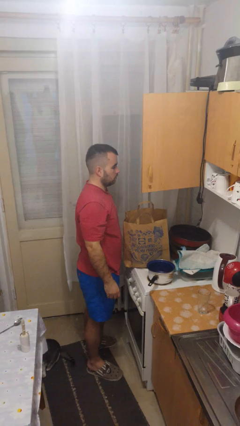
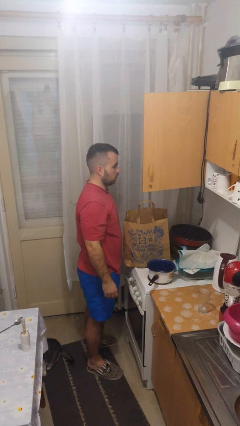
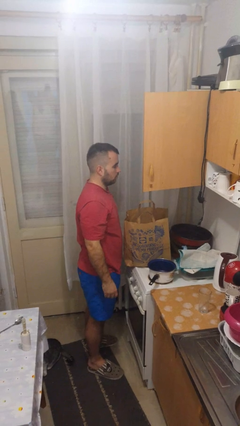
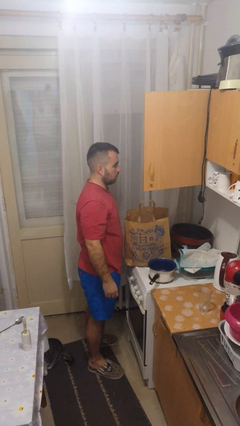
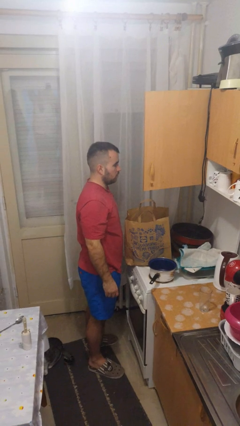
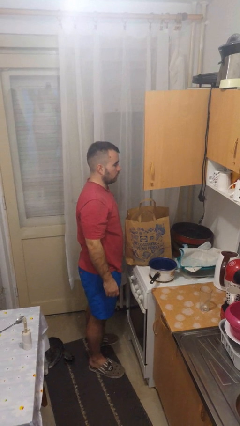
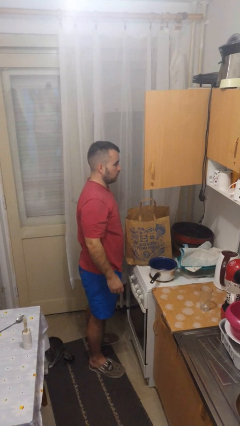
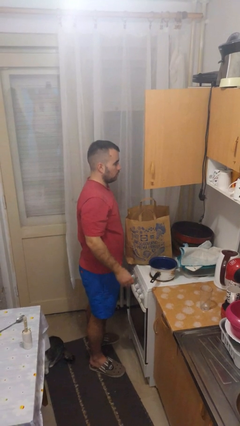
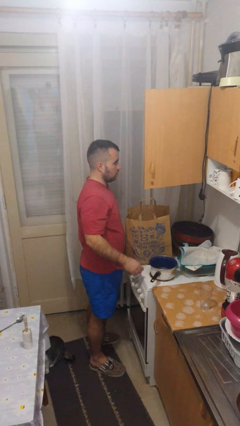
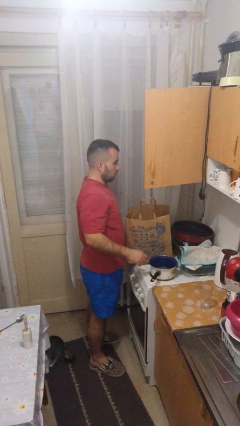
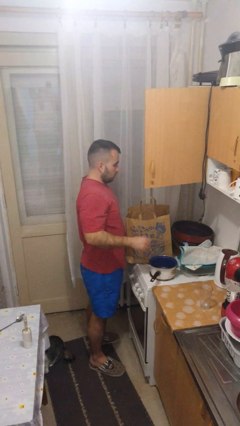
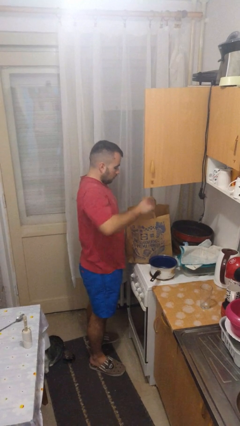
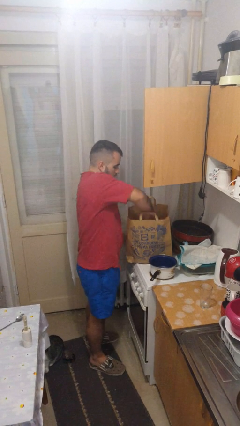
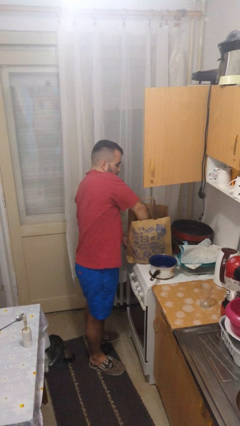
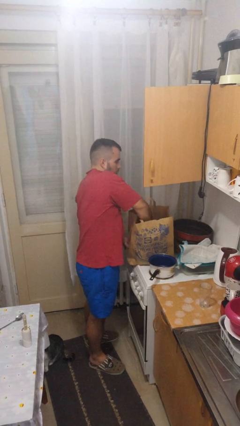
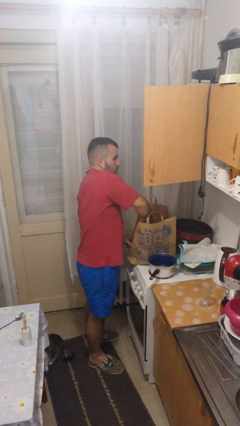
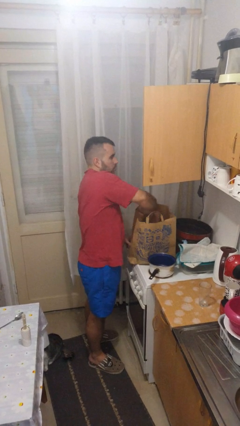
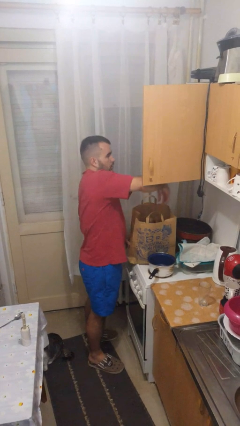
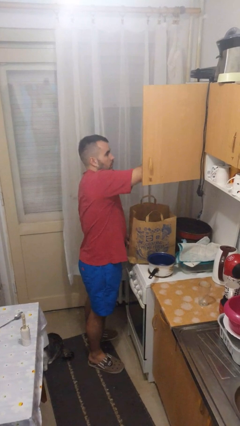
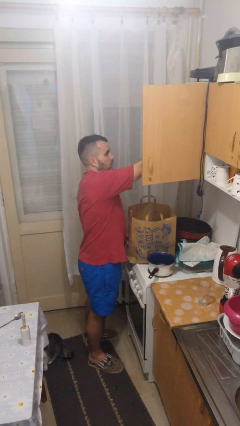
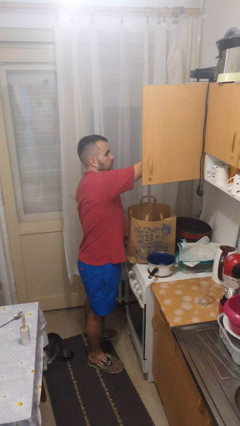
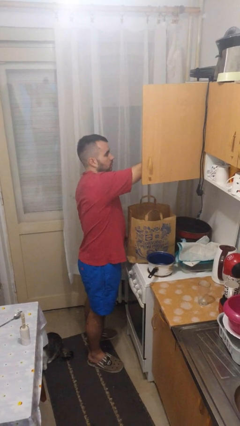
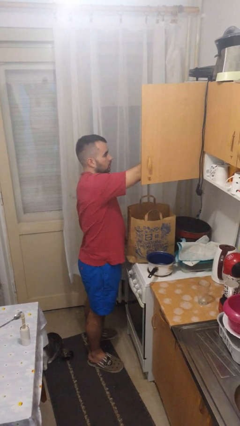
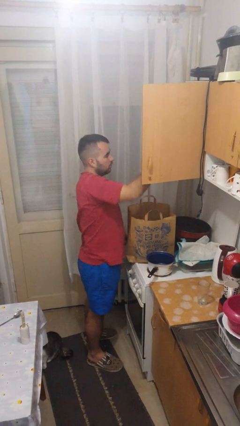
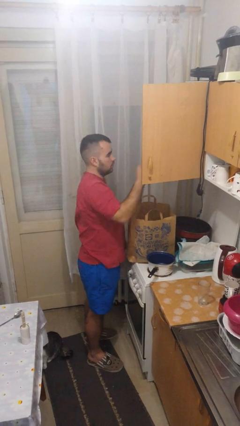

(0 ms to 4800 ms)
person loads groceries into cabinet

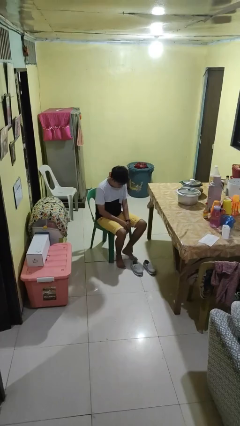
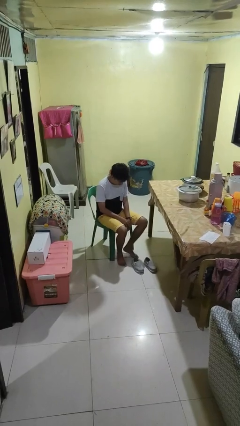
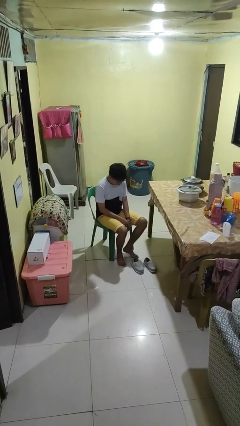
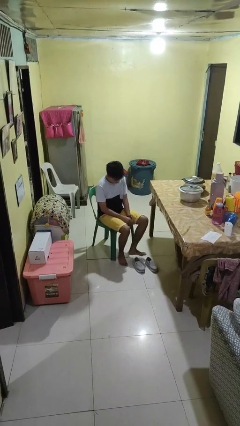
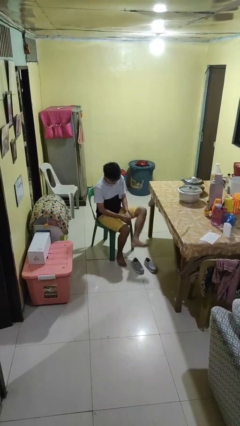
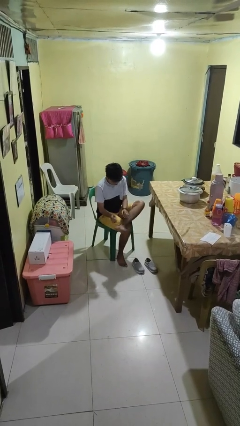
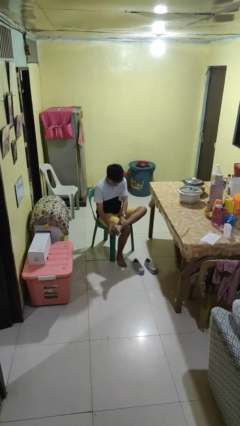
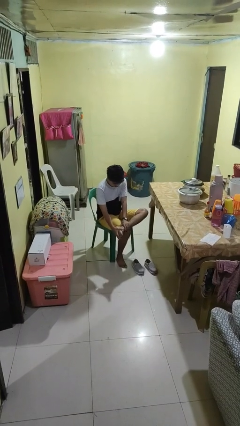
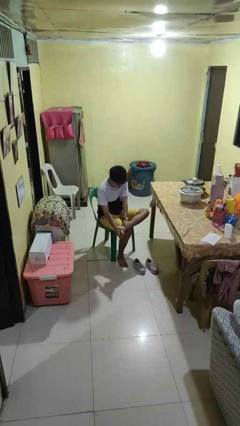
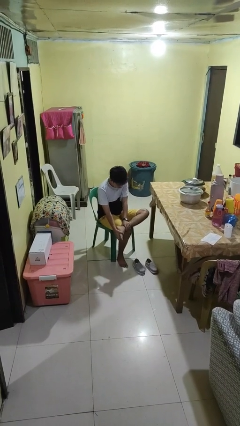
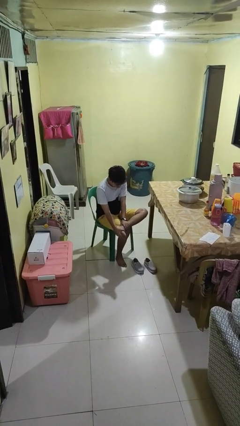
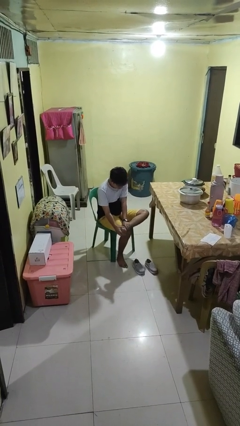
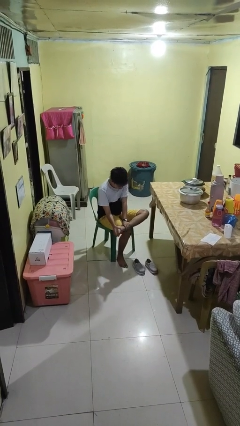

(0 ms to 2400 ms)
person rubs foot

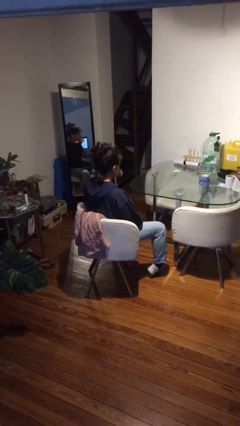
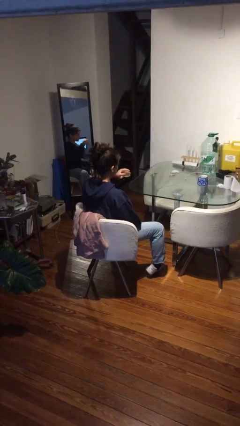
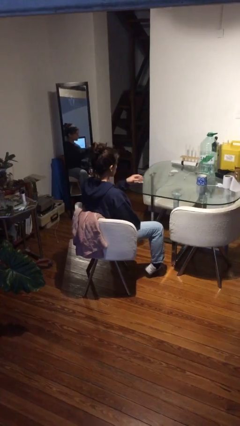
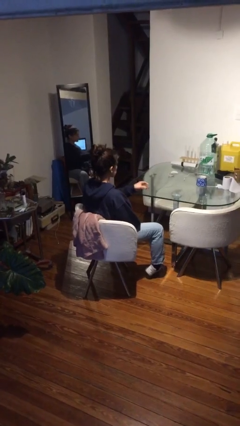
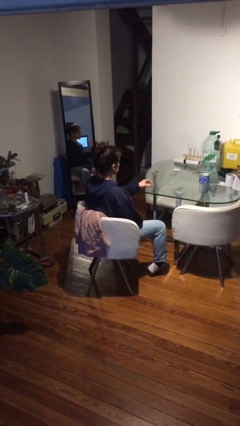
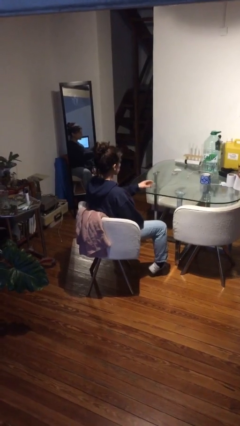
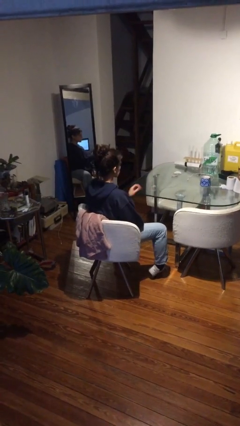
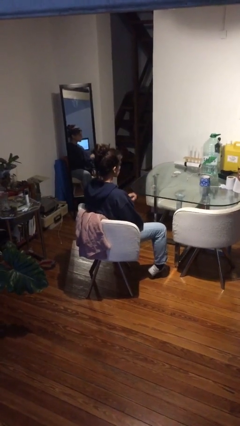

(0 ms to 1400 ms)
person puts down object on table

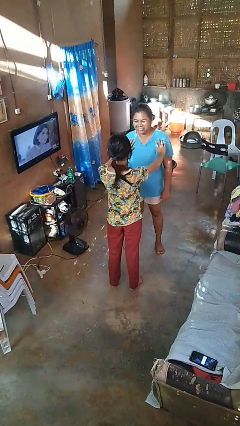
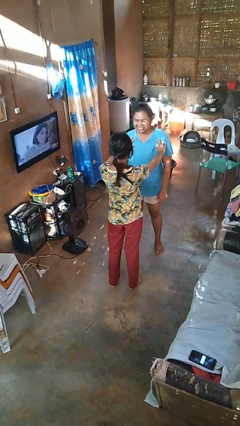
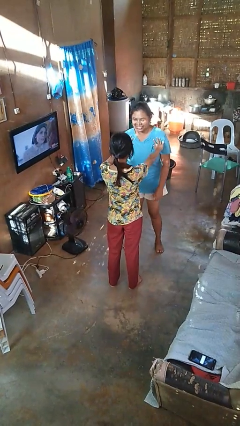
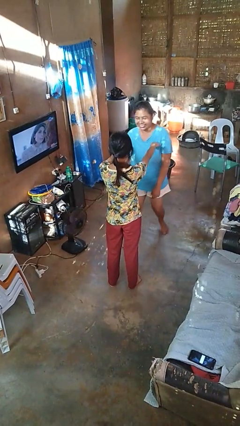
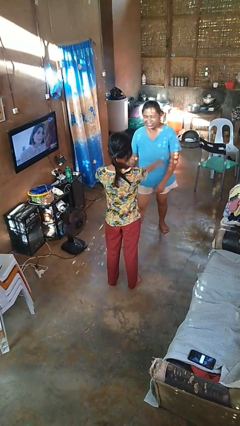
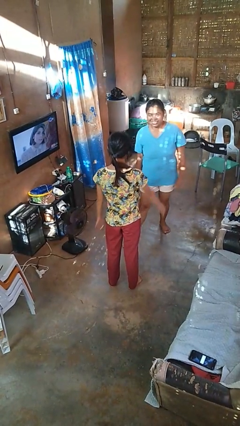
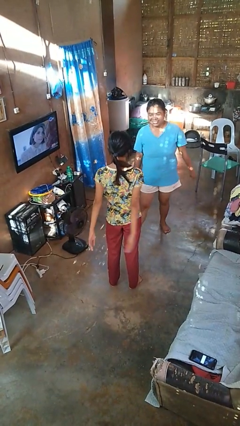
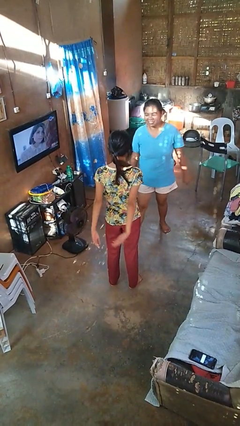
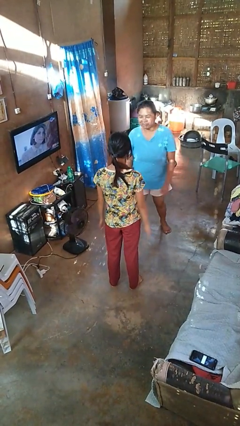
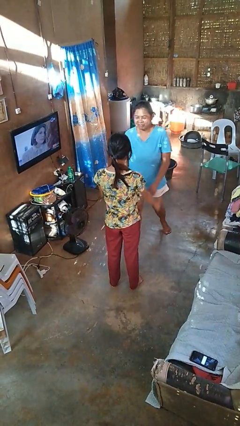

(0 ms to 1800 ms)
person shoves person

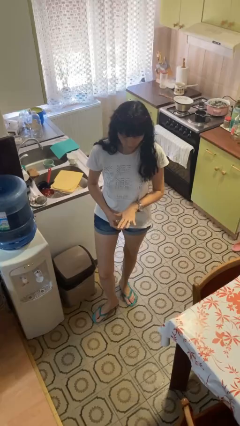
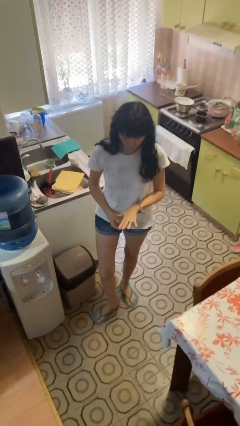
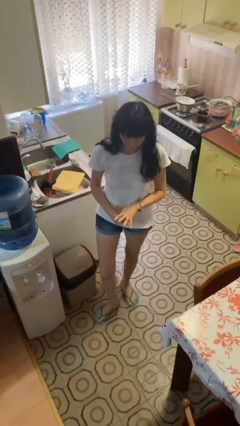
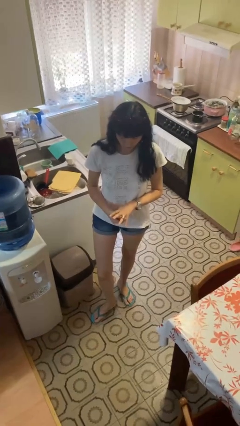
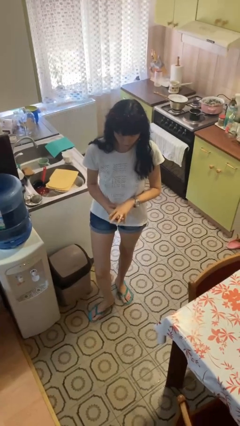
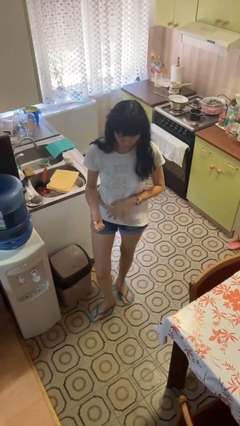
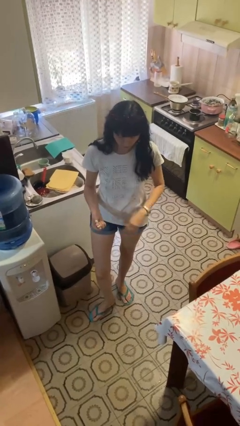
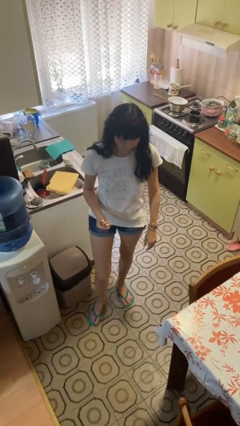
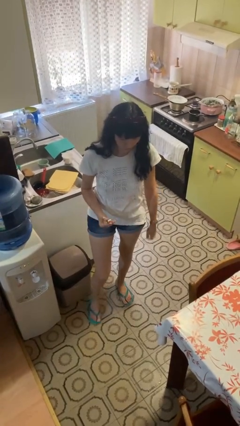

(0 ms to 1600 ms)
person takes off ring

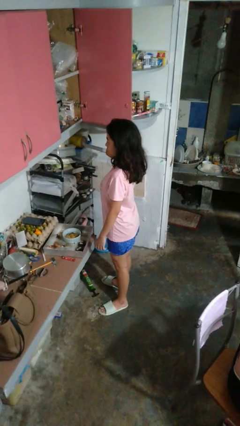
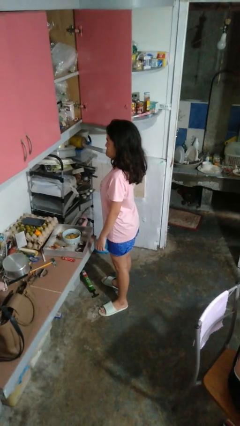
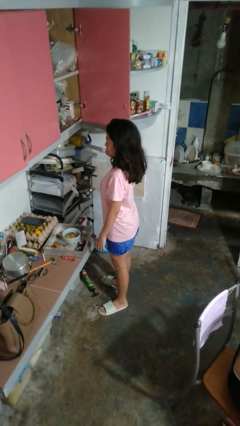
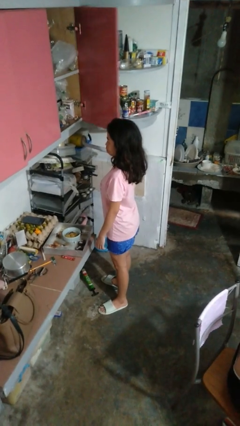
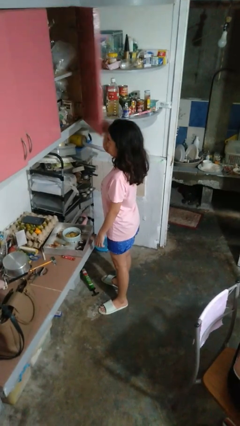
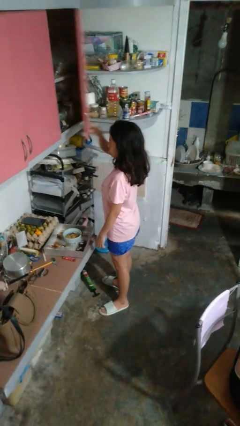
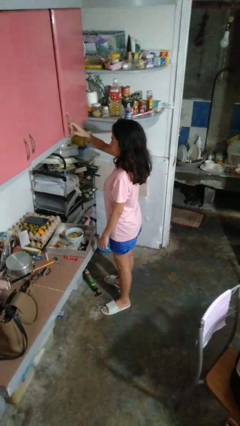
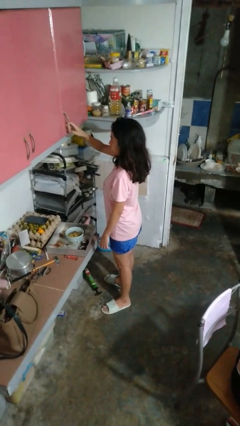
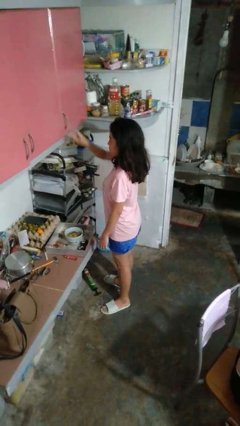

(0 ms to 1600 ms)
person closes cabinet

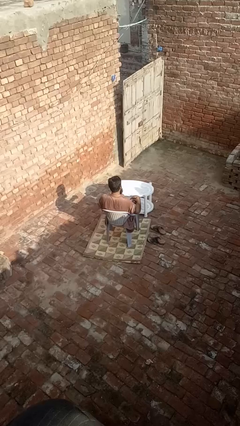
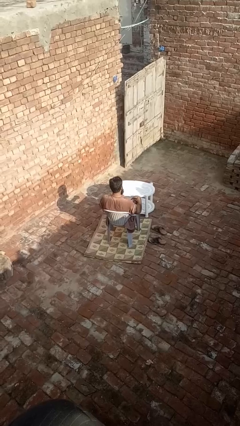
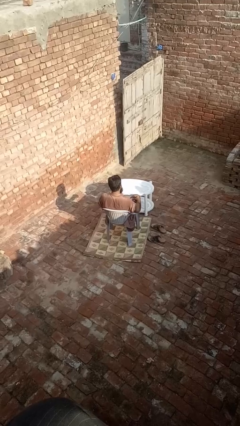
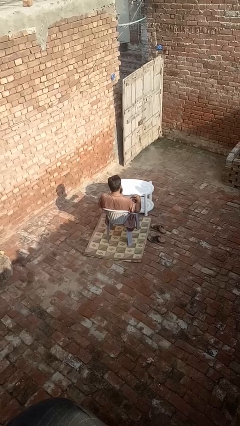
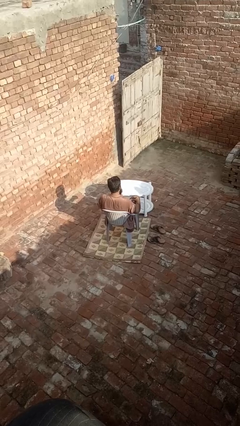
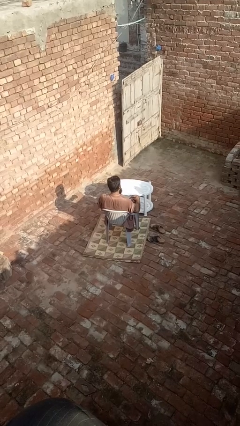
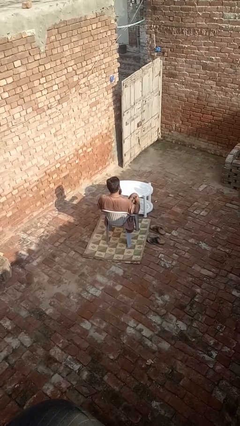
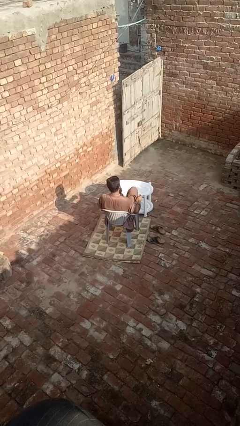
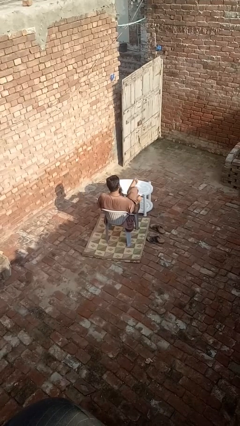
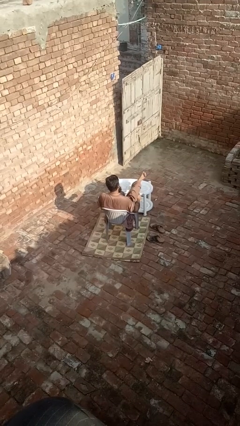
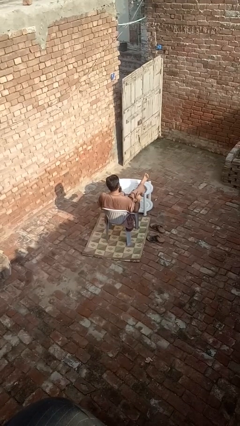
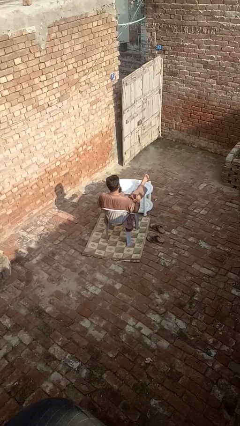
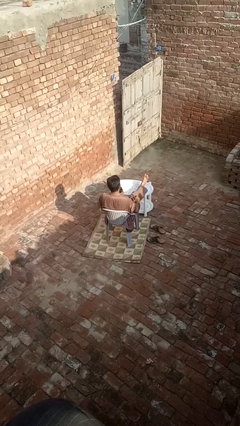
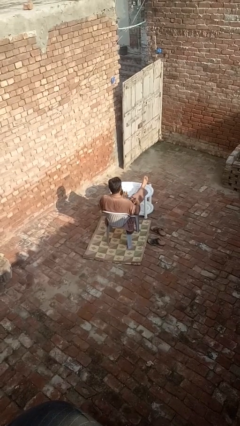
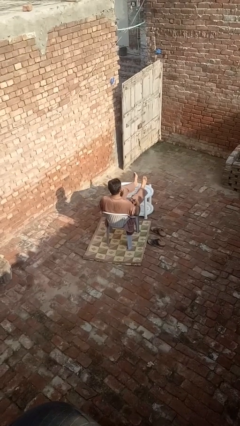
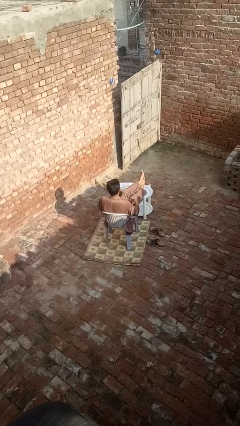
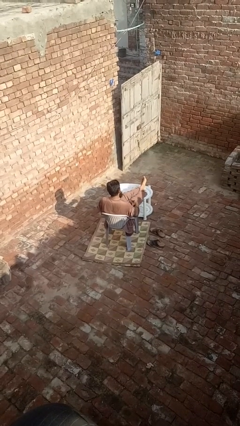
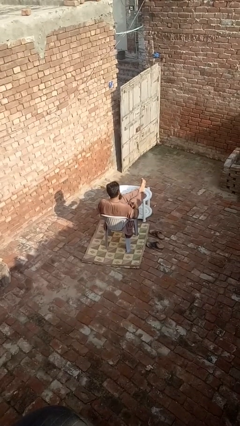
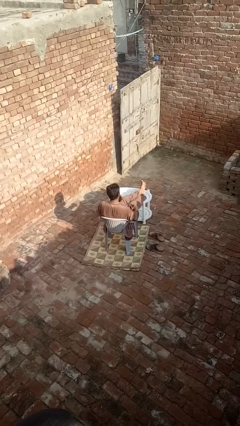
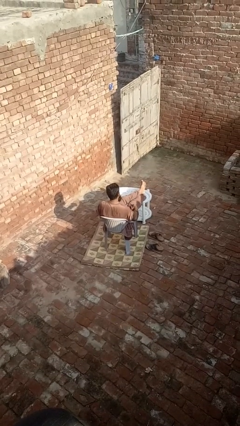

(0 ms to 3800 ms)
person puts feet up
